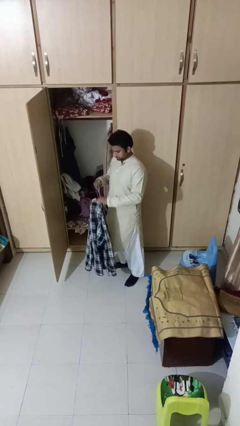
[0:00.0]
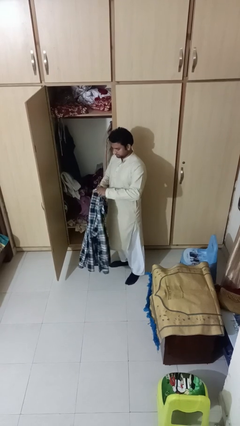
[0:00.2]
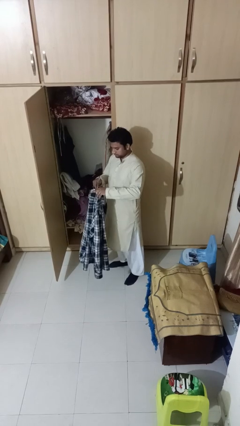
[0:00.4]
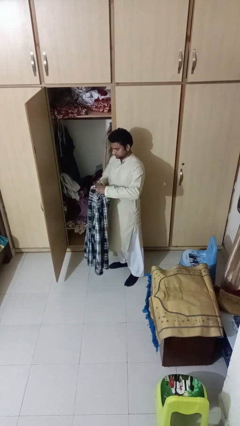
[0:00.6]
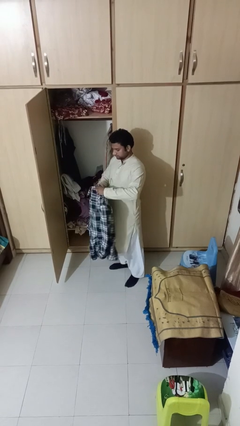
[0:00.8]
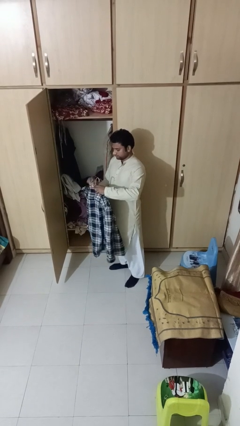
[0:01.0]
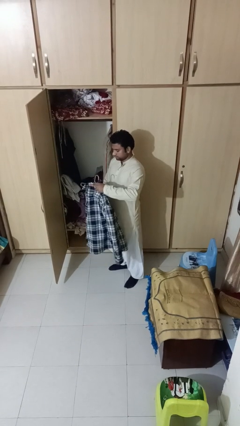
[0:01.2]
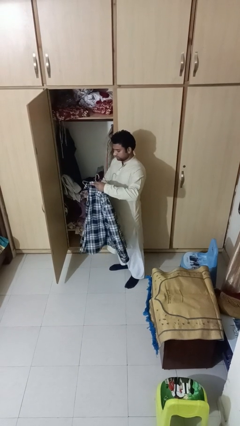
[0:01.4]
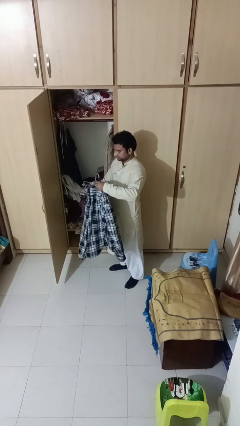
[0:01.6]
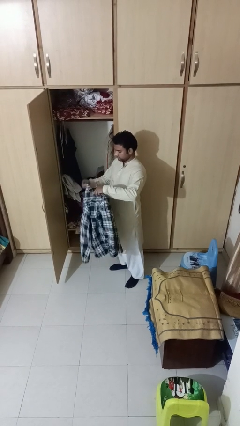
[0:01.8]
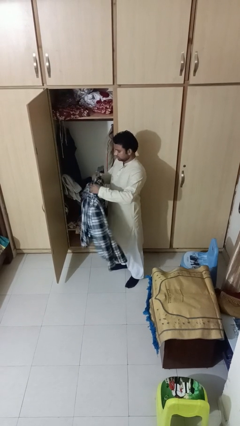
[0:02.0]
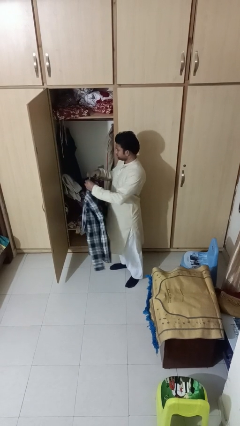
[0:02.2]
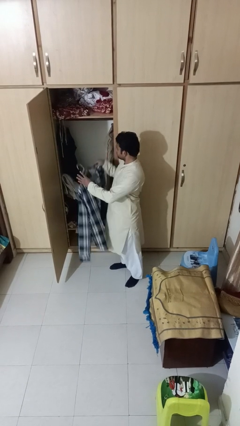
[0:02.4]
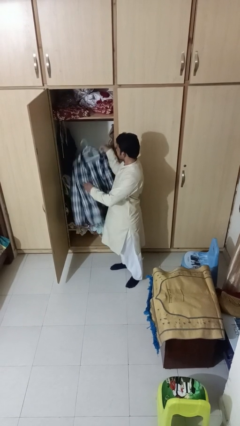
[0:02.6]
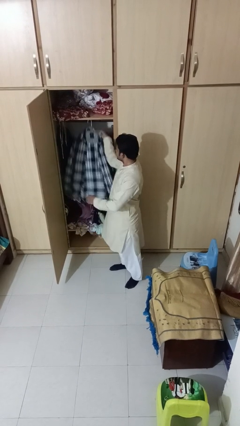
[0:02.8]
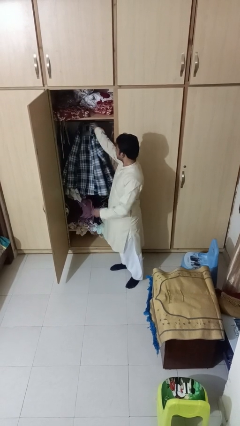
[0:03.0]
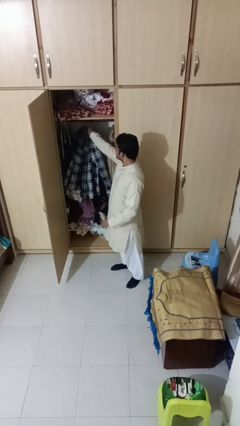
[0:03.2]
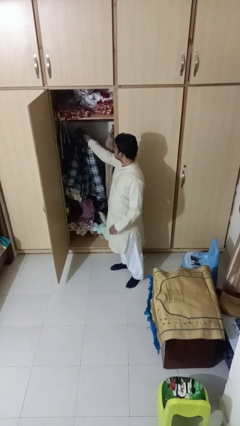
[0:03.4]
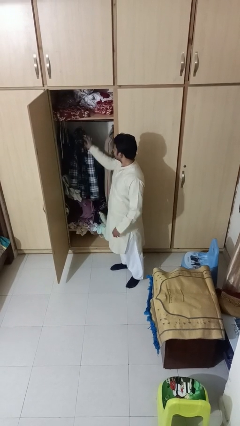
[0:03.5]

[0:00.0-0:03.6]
person puts clothes into closet

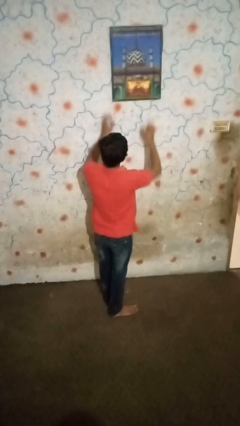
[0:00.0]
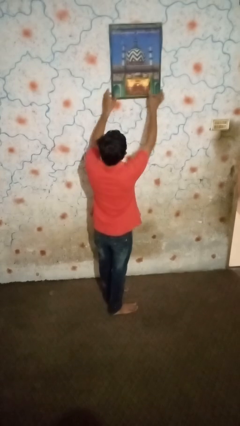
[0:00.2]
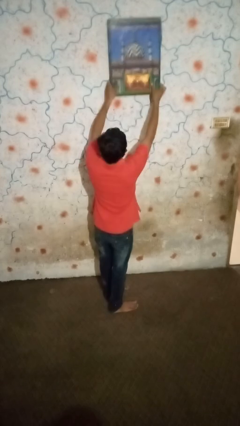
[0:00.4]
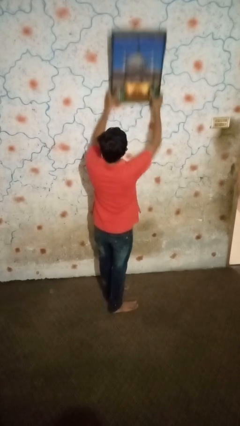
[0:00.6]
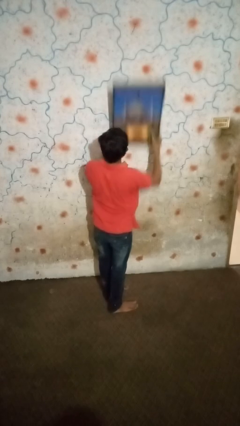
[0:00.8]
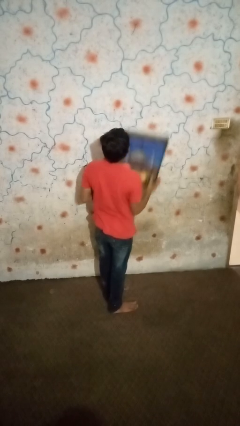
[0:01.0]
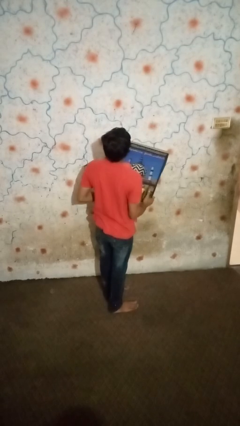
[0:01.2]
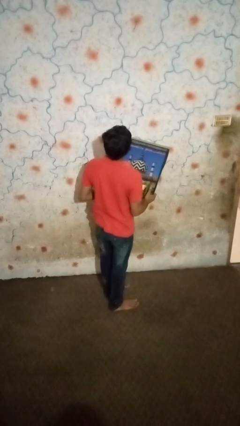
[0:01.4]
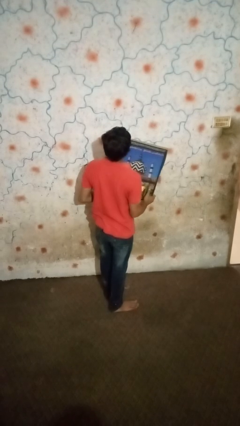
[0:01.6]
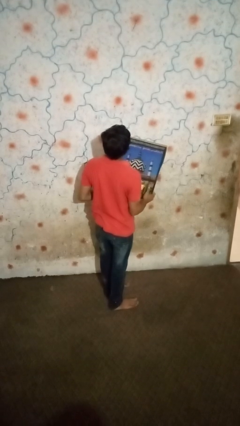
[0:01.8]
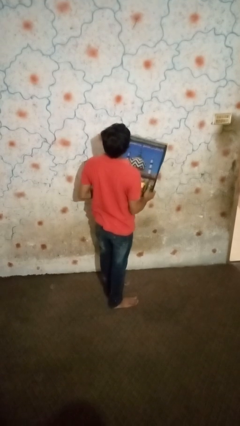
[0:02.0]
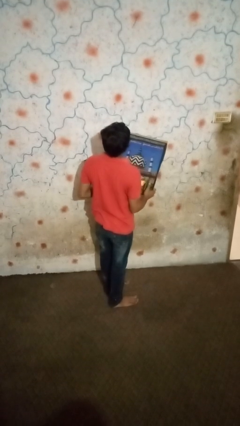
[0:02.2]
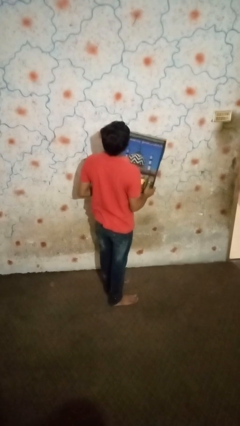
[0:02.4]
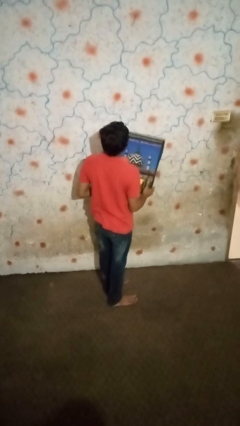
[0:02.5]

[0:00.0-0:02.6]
person takes down picture frame

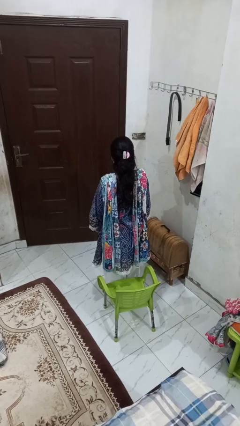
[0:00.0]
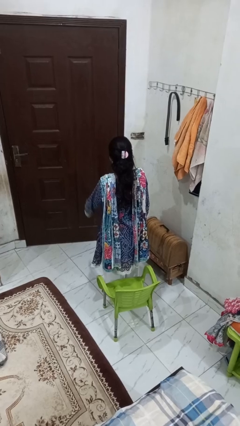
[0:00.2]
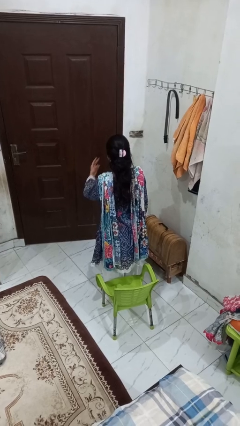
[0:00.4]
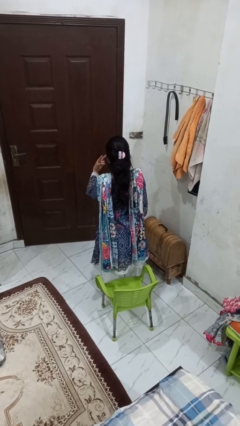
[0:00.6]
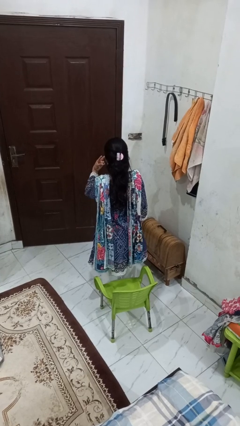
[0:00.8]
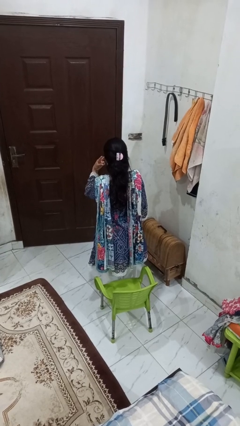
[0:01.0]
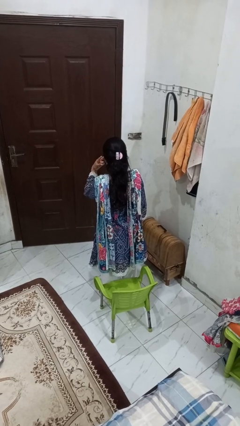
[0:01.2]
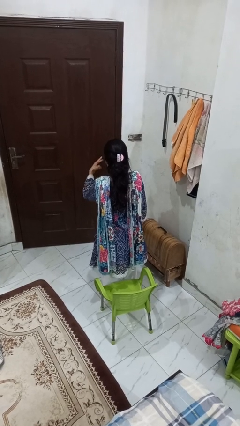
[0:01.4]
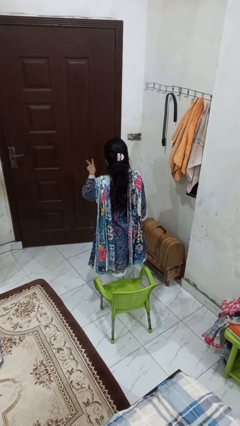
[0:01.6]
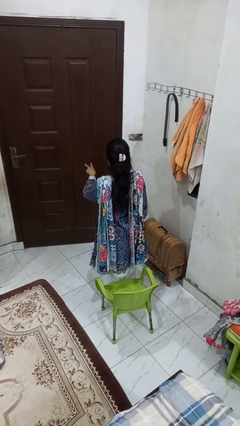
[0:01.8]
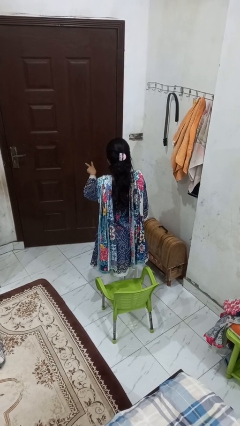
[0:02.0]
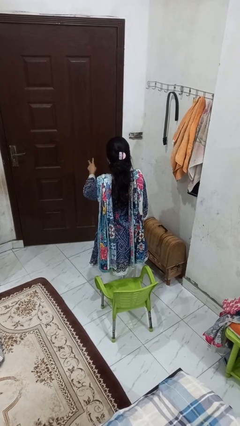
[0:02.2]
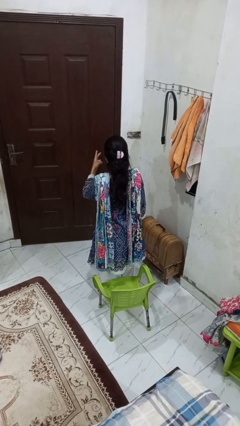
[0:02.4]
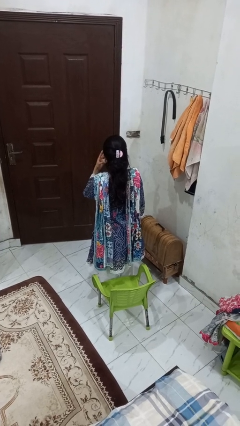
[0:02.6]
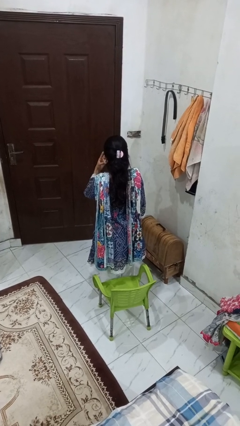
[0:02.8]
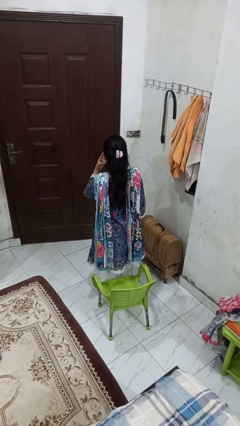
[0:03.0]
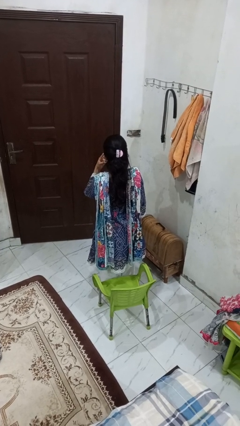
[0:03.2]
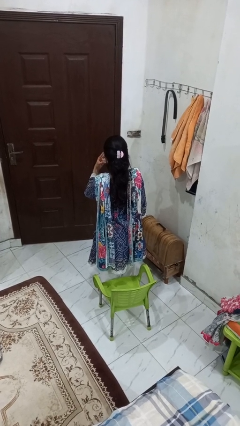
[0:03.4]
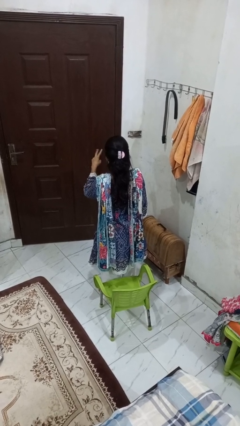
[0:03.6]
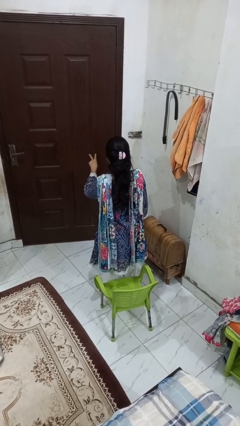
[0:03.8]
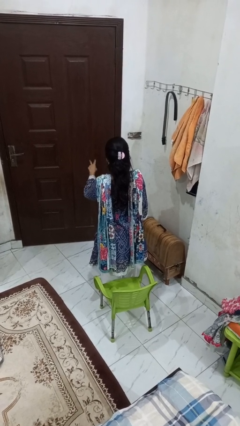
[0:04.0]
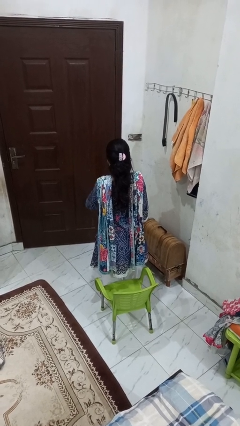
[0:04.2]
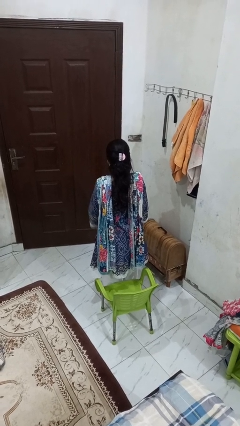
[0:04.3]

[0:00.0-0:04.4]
person gestures watch closely

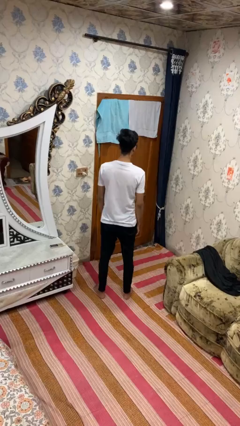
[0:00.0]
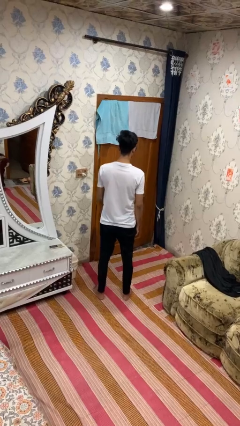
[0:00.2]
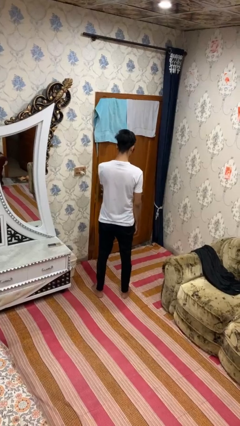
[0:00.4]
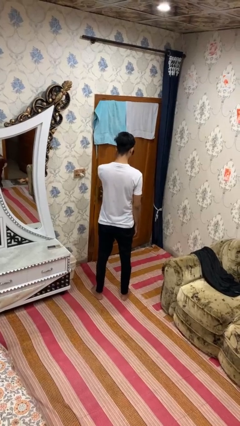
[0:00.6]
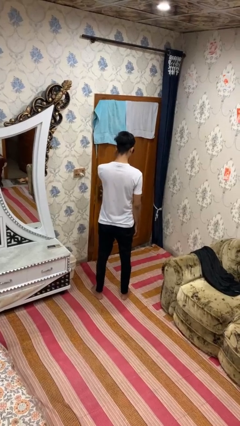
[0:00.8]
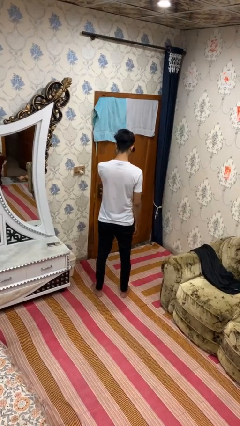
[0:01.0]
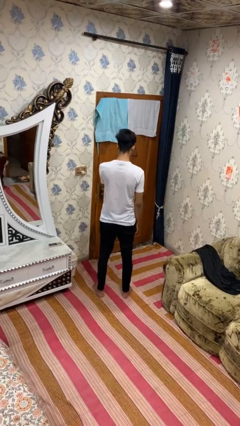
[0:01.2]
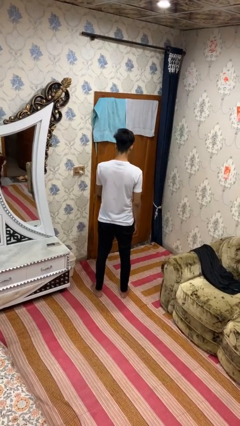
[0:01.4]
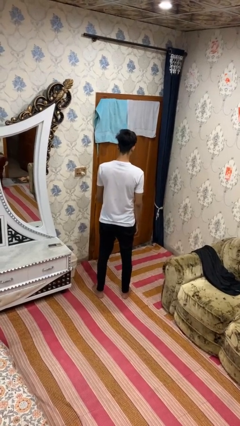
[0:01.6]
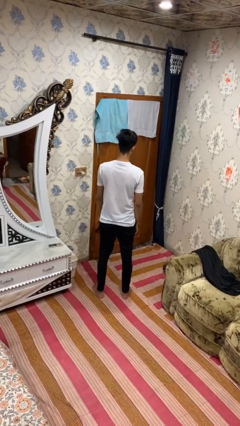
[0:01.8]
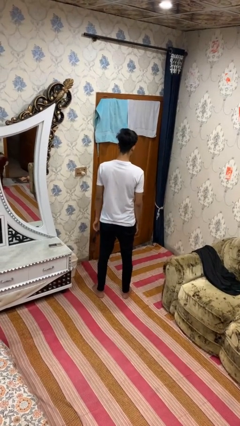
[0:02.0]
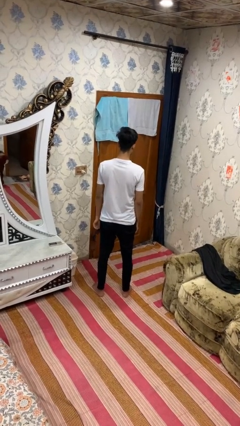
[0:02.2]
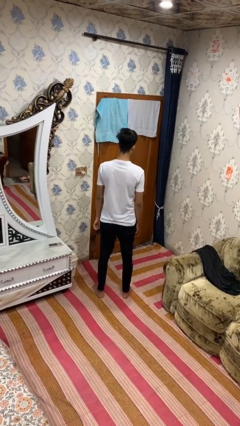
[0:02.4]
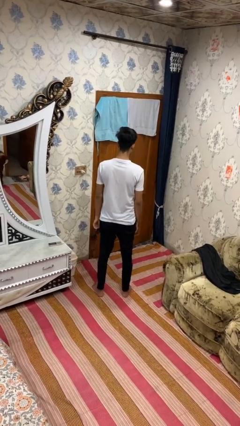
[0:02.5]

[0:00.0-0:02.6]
person takes off sunglasses

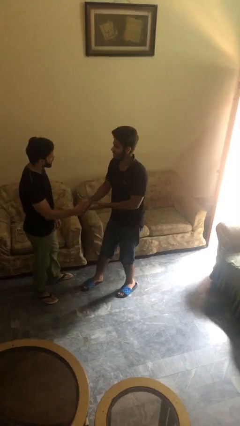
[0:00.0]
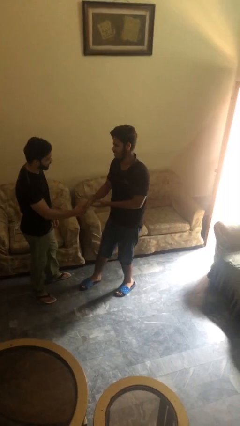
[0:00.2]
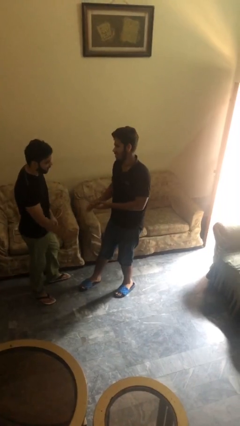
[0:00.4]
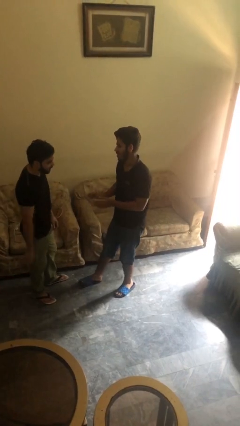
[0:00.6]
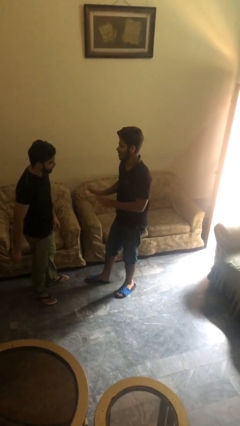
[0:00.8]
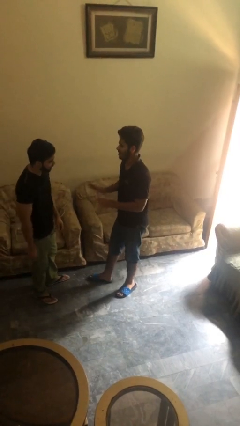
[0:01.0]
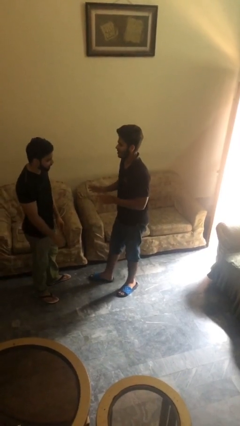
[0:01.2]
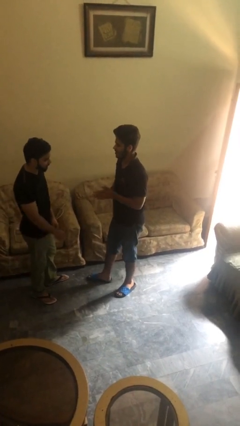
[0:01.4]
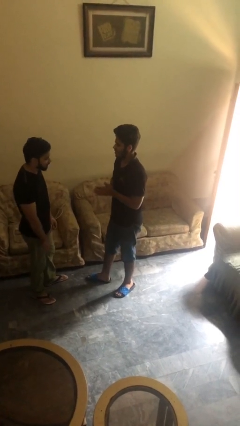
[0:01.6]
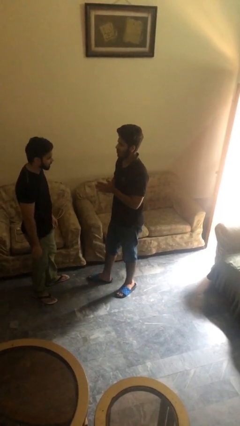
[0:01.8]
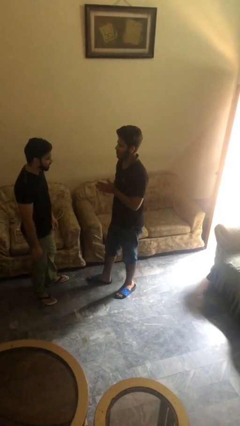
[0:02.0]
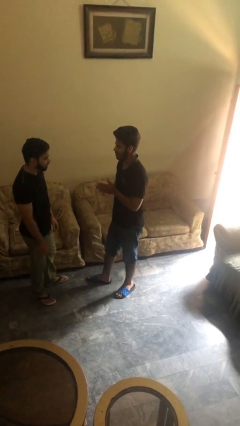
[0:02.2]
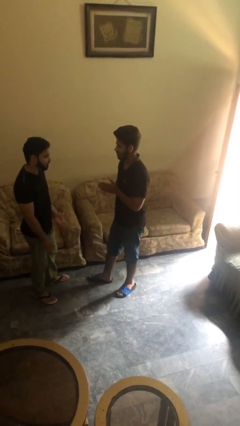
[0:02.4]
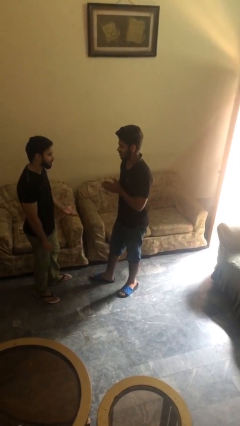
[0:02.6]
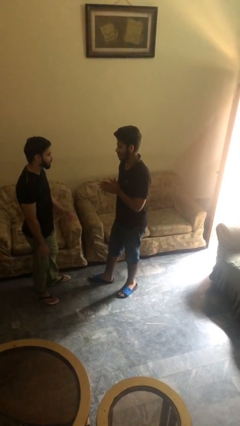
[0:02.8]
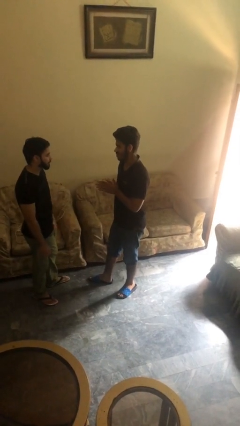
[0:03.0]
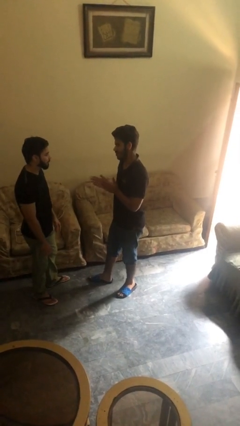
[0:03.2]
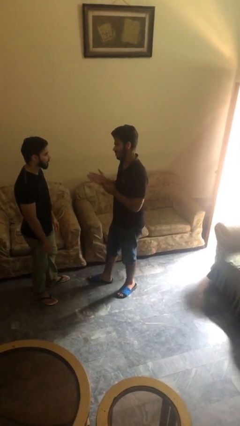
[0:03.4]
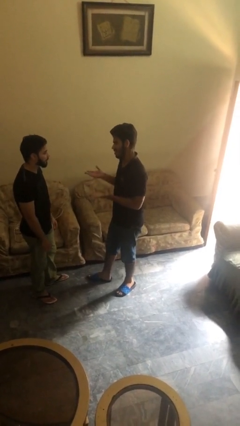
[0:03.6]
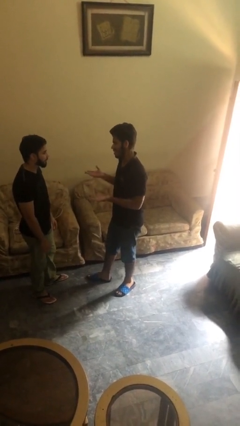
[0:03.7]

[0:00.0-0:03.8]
person talks to person

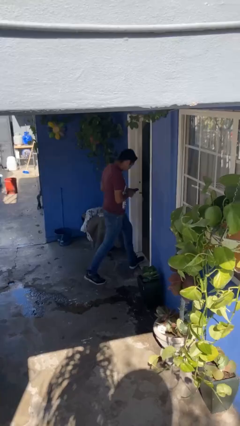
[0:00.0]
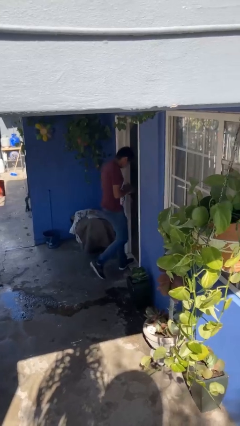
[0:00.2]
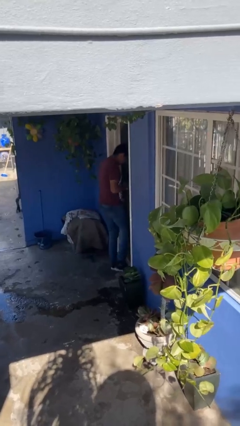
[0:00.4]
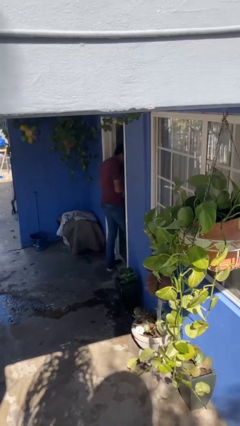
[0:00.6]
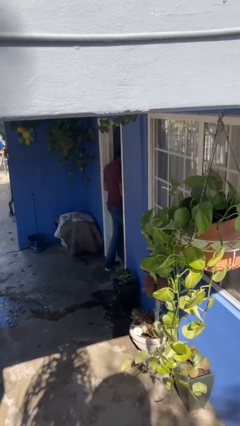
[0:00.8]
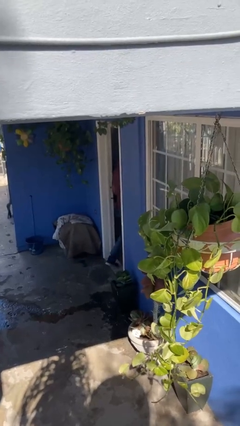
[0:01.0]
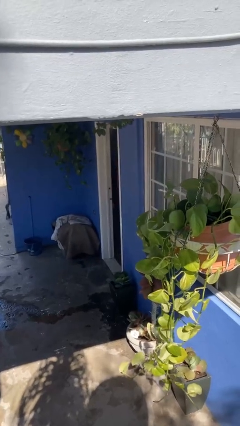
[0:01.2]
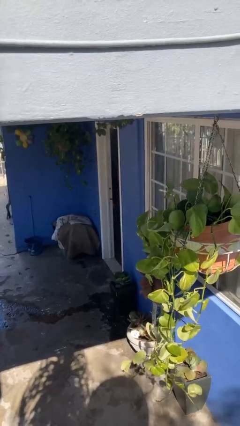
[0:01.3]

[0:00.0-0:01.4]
person exits scene through structure
